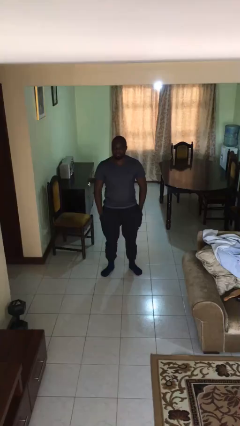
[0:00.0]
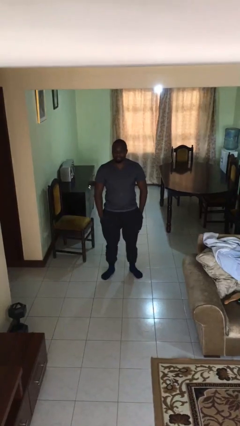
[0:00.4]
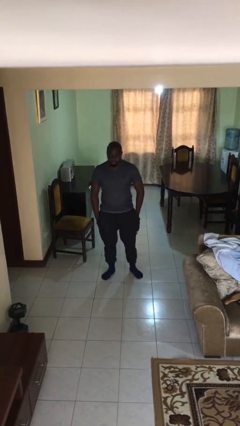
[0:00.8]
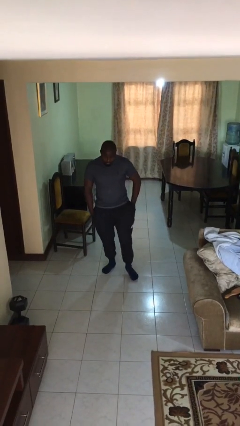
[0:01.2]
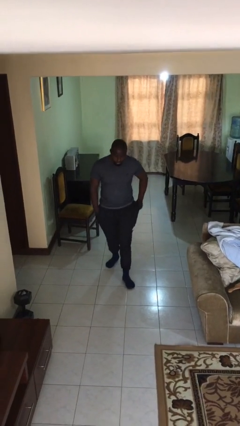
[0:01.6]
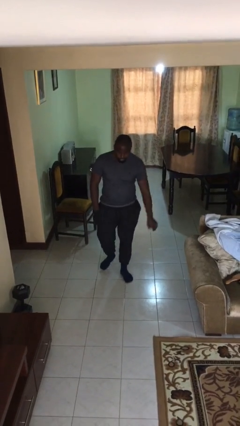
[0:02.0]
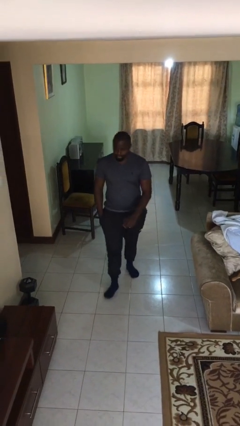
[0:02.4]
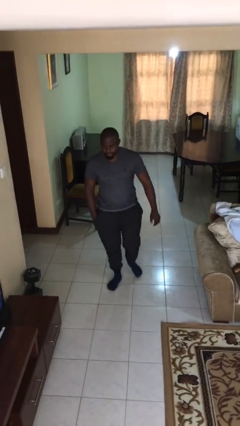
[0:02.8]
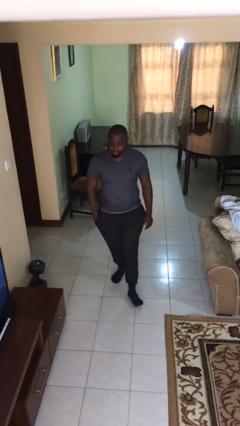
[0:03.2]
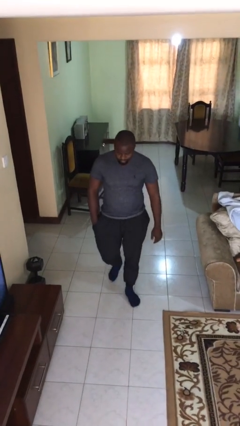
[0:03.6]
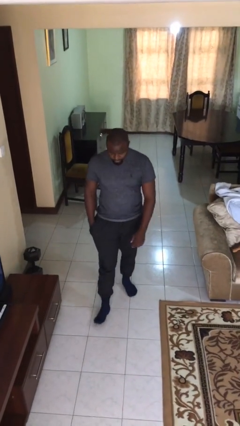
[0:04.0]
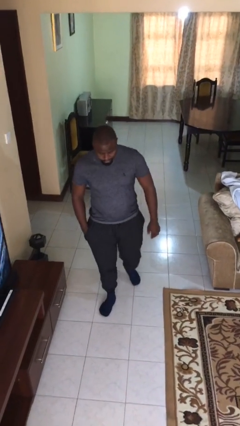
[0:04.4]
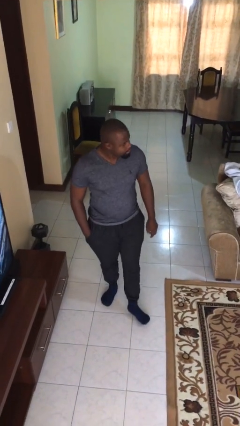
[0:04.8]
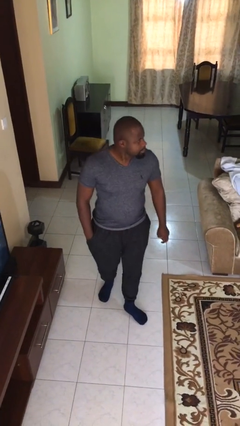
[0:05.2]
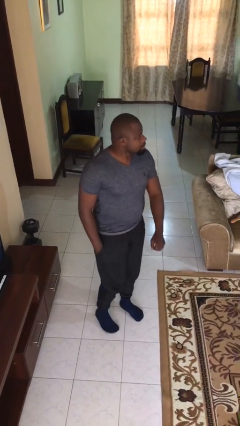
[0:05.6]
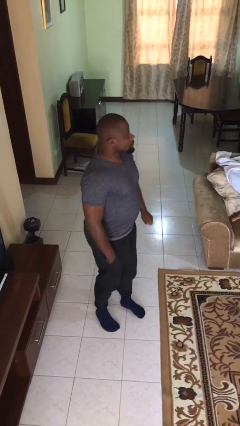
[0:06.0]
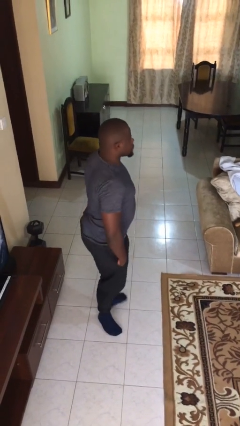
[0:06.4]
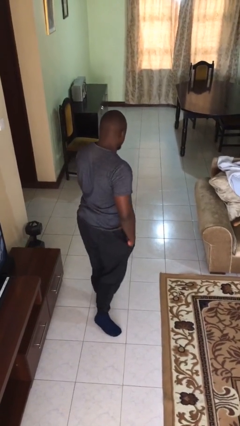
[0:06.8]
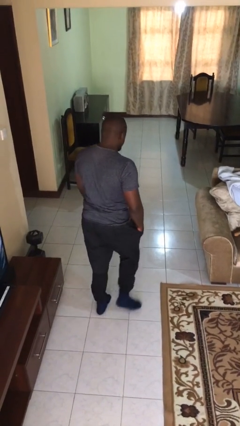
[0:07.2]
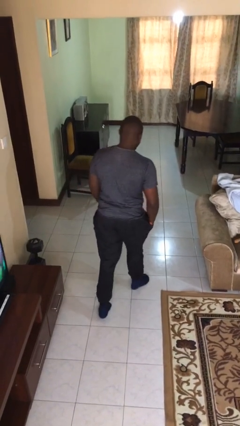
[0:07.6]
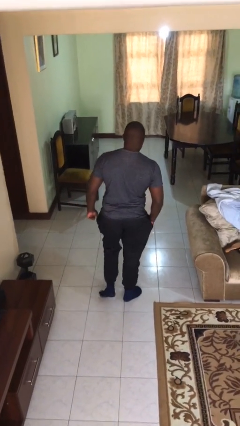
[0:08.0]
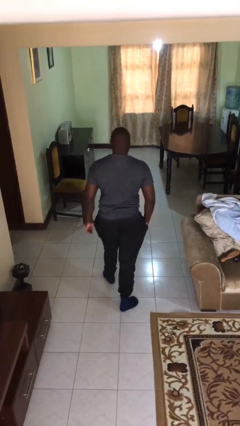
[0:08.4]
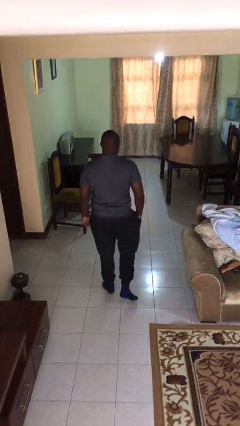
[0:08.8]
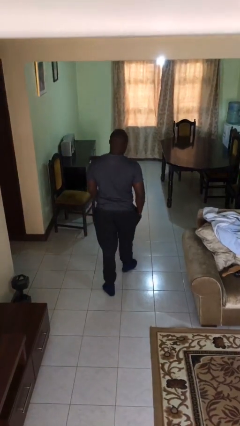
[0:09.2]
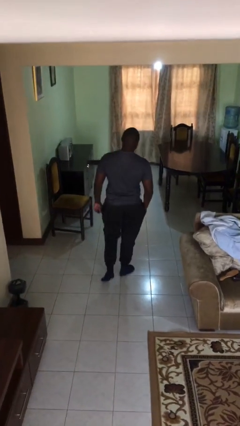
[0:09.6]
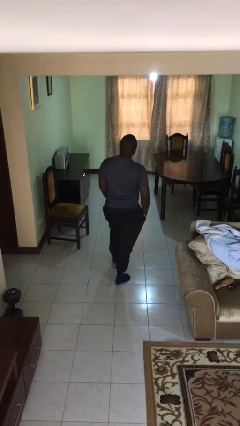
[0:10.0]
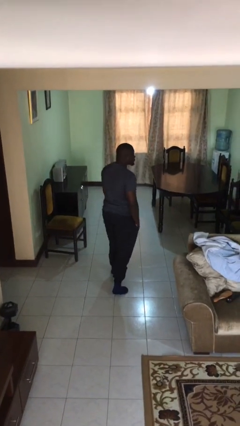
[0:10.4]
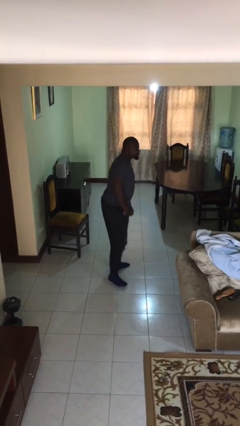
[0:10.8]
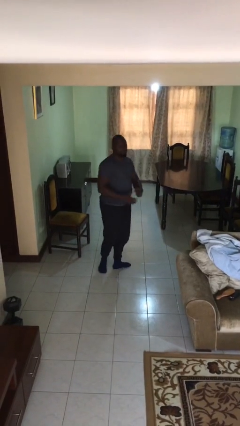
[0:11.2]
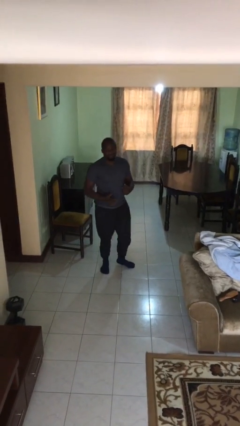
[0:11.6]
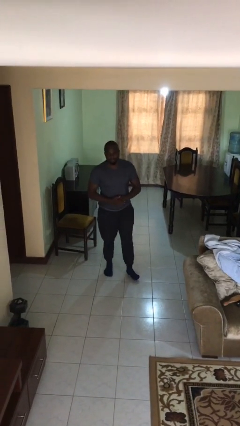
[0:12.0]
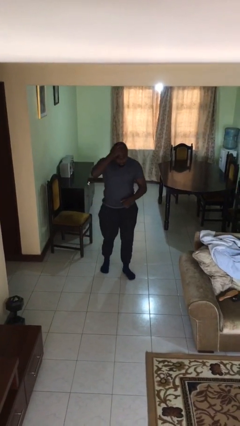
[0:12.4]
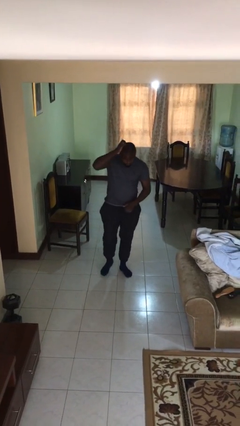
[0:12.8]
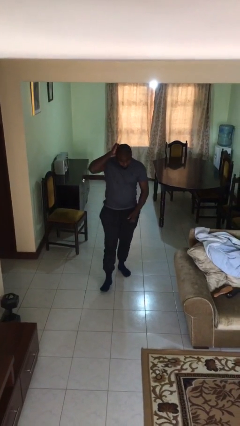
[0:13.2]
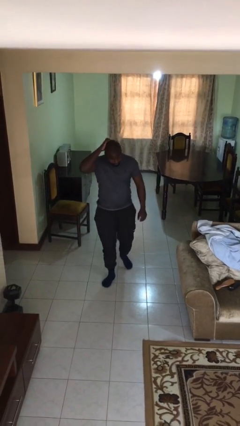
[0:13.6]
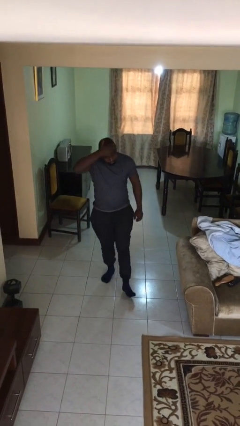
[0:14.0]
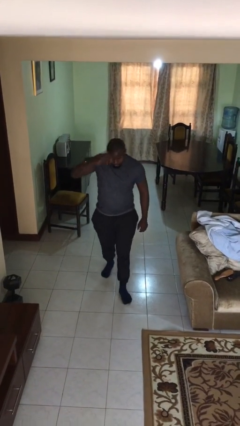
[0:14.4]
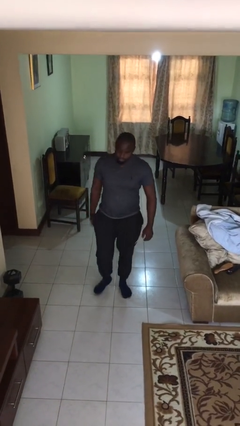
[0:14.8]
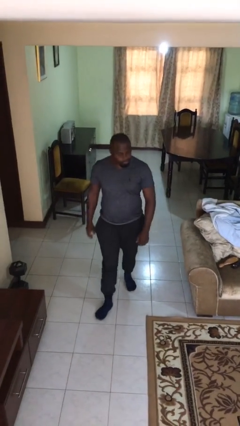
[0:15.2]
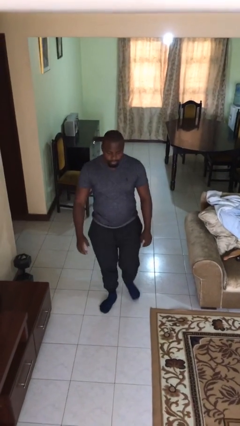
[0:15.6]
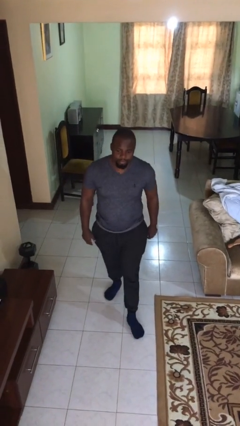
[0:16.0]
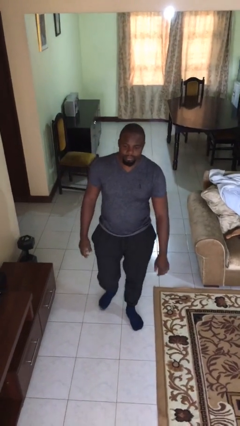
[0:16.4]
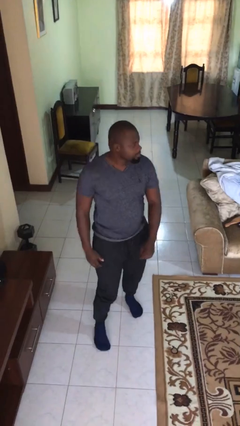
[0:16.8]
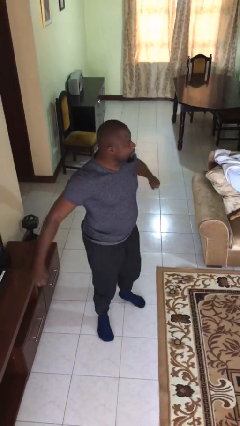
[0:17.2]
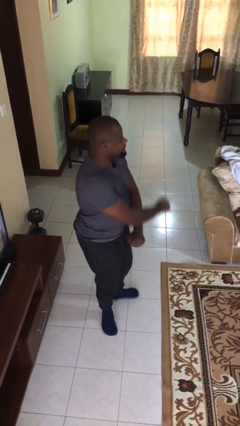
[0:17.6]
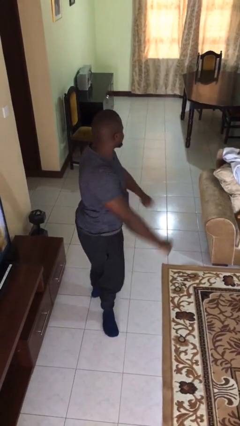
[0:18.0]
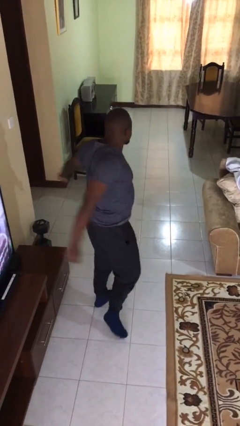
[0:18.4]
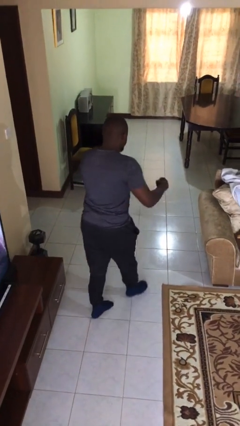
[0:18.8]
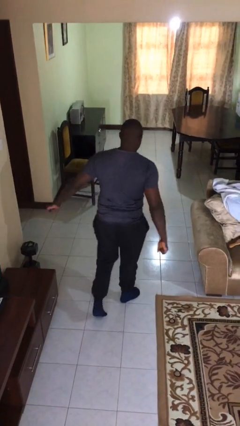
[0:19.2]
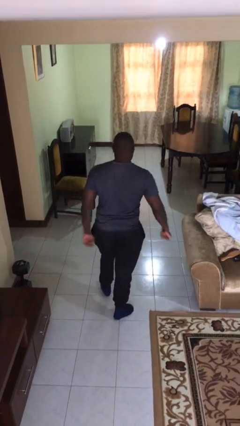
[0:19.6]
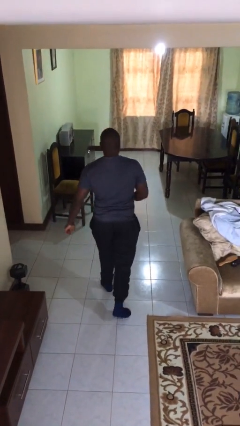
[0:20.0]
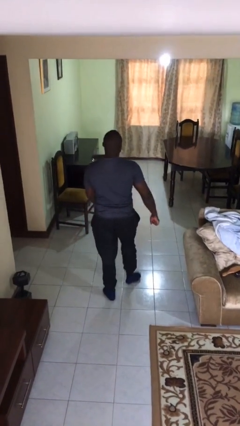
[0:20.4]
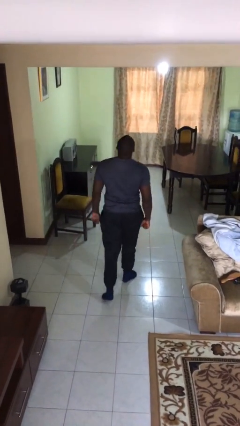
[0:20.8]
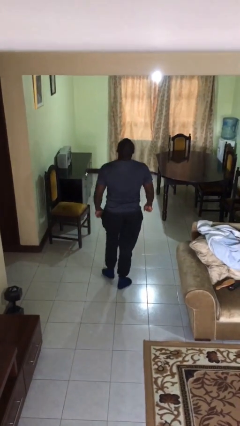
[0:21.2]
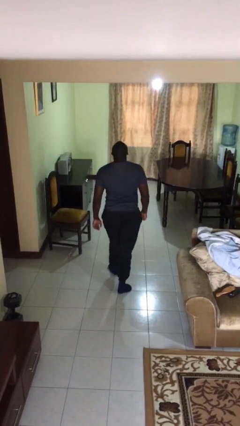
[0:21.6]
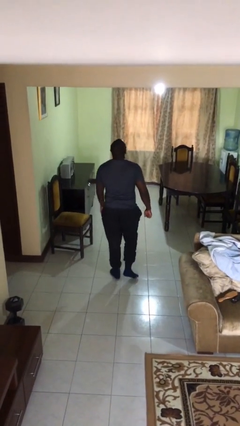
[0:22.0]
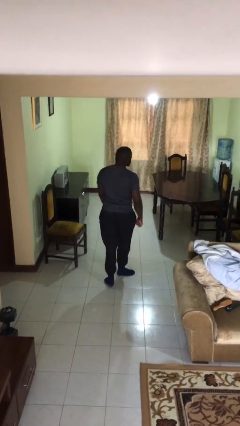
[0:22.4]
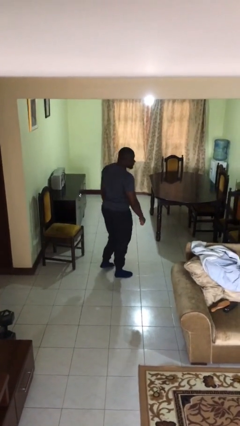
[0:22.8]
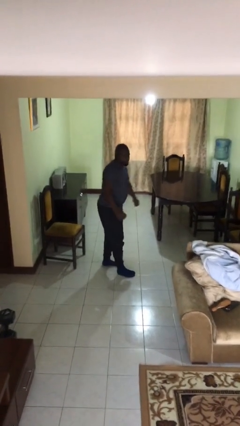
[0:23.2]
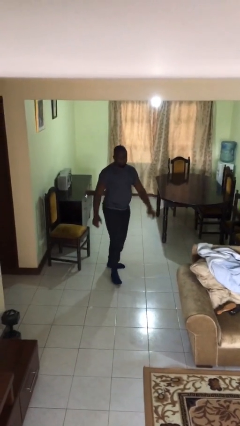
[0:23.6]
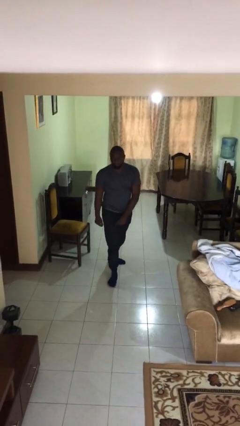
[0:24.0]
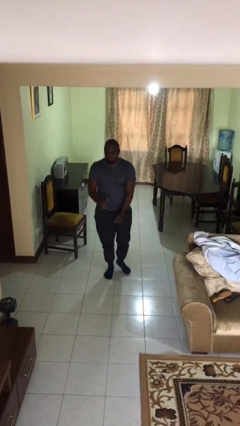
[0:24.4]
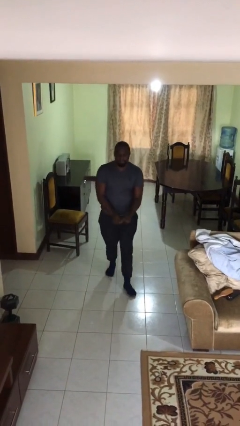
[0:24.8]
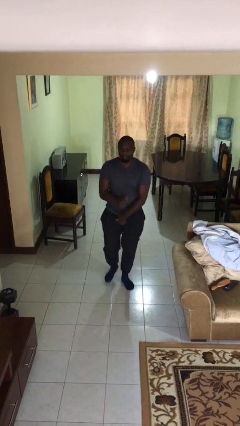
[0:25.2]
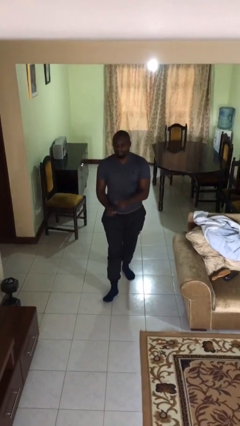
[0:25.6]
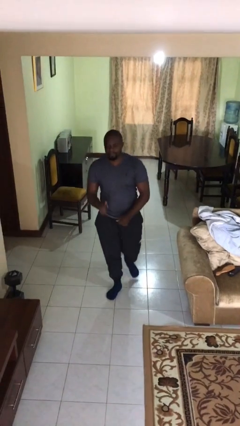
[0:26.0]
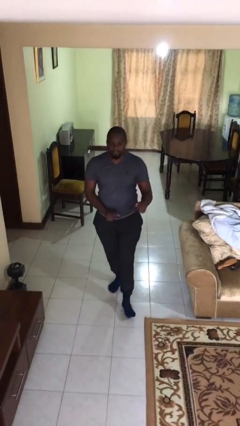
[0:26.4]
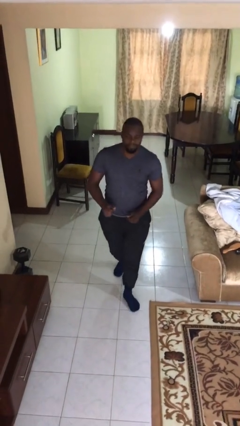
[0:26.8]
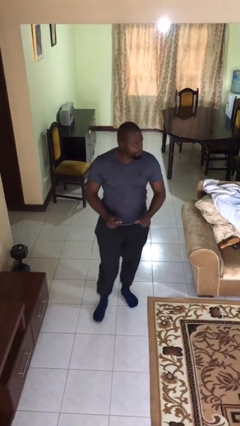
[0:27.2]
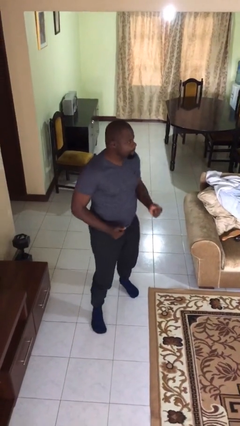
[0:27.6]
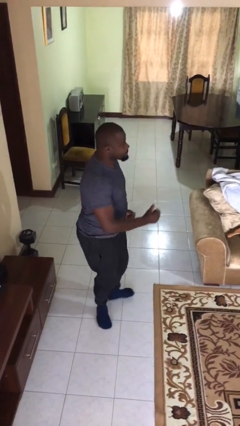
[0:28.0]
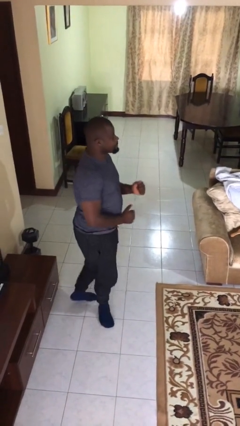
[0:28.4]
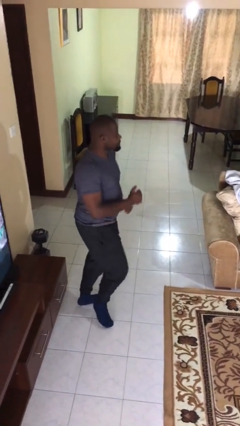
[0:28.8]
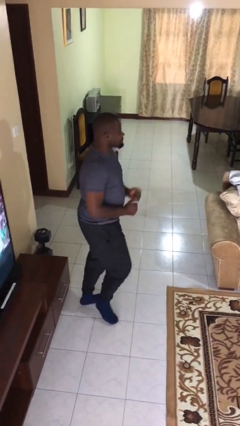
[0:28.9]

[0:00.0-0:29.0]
person walks
